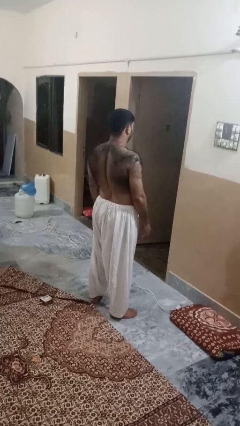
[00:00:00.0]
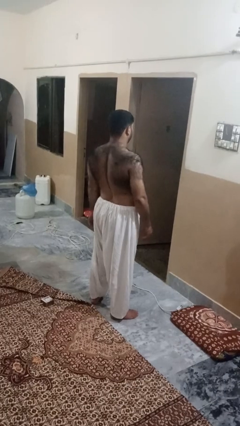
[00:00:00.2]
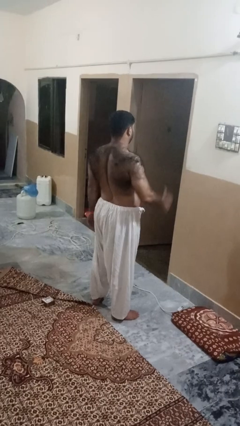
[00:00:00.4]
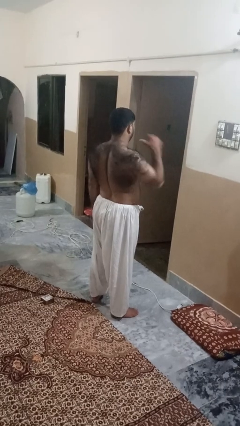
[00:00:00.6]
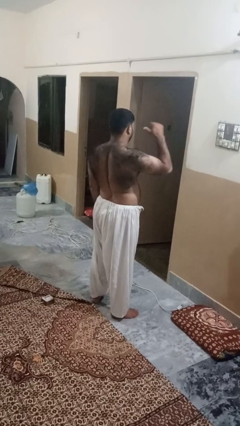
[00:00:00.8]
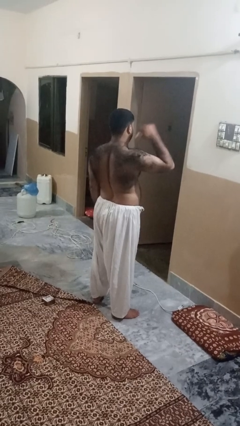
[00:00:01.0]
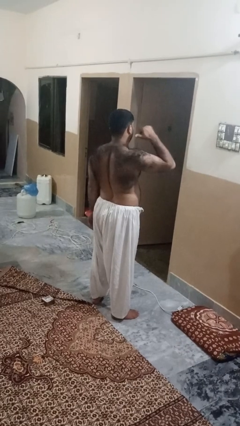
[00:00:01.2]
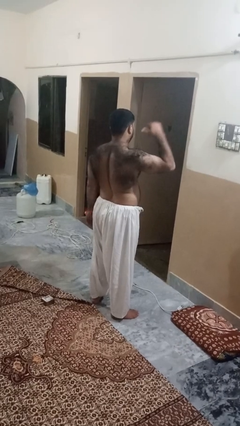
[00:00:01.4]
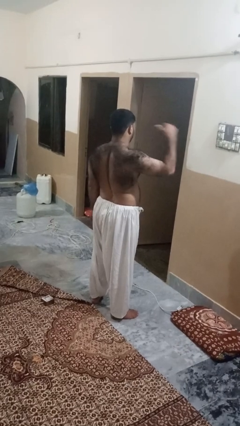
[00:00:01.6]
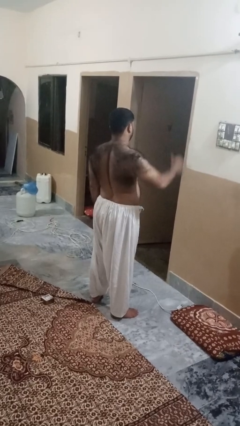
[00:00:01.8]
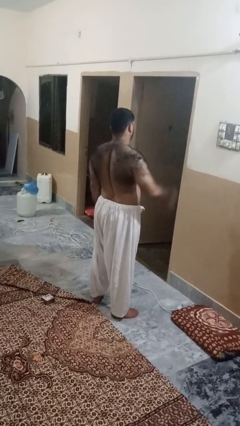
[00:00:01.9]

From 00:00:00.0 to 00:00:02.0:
person gestures behind me

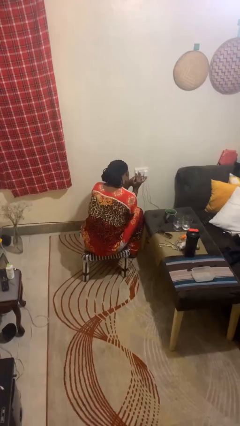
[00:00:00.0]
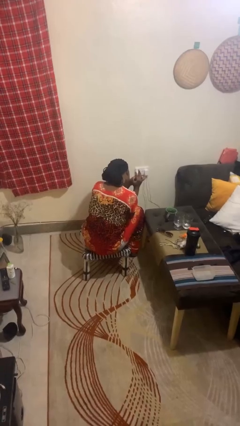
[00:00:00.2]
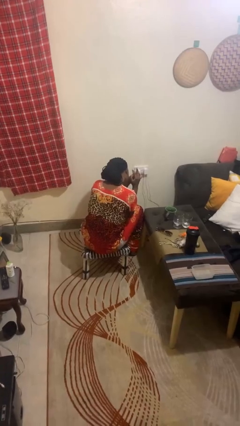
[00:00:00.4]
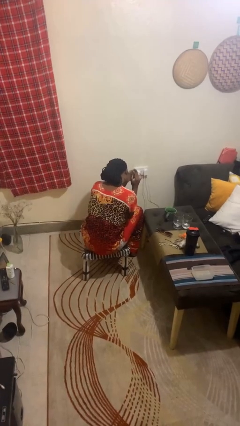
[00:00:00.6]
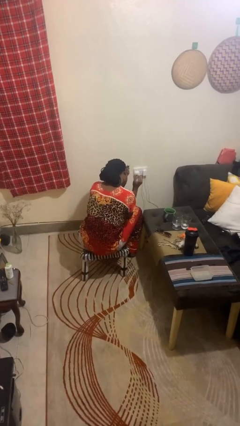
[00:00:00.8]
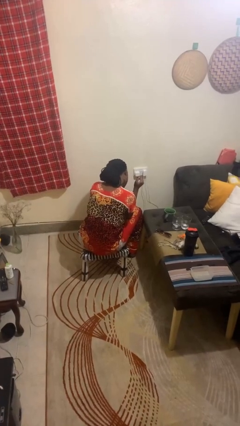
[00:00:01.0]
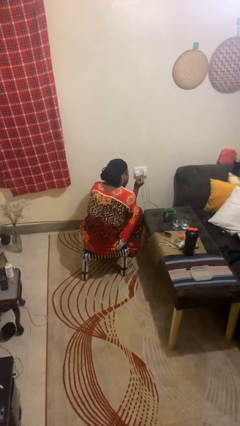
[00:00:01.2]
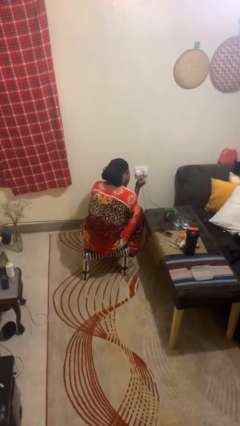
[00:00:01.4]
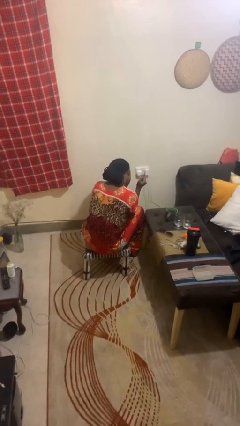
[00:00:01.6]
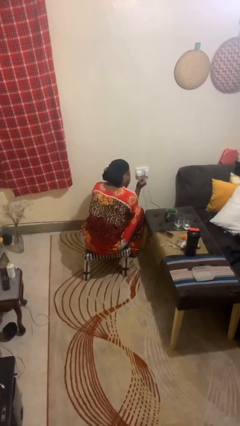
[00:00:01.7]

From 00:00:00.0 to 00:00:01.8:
person takes off ring

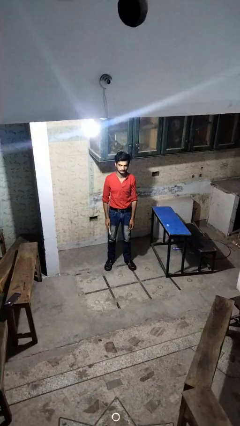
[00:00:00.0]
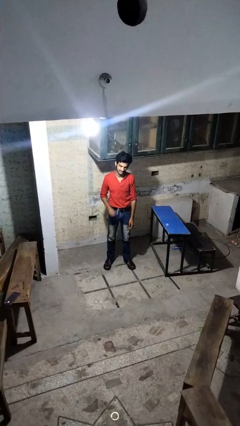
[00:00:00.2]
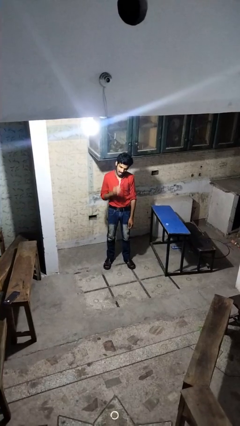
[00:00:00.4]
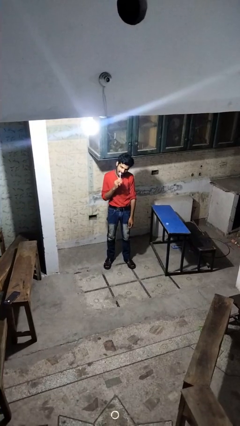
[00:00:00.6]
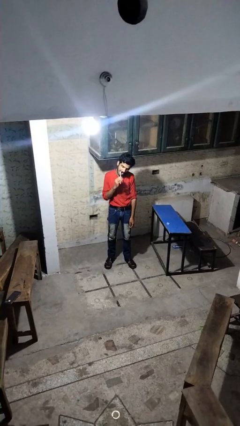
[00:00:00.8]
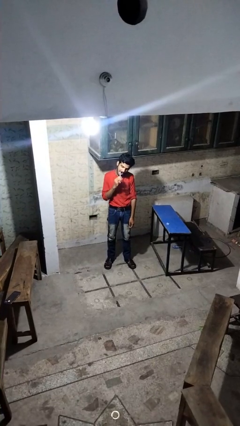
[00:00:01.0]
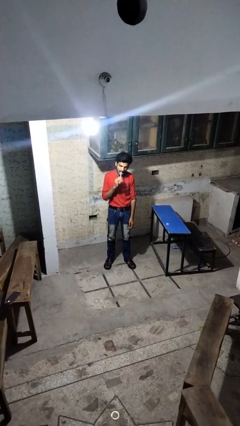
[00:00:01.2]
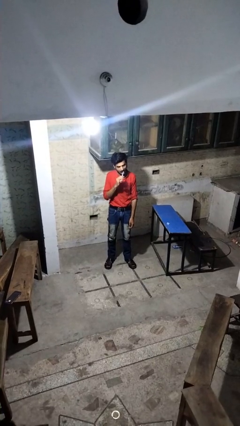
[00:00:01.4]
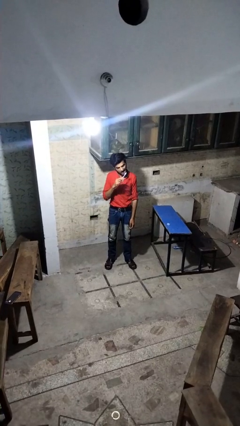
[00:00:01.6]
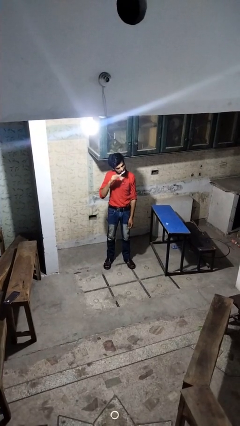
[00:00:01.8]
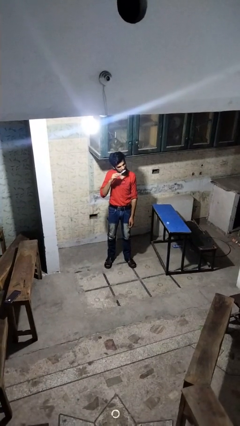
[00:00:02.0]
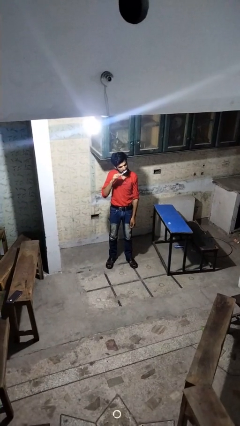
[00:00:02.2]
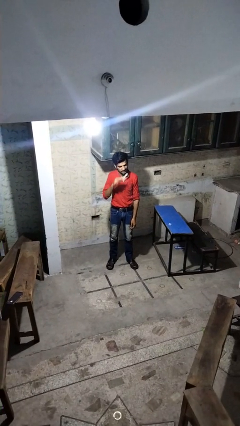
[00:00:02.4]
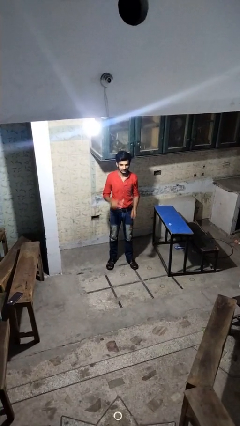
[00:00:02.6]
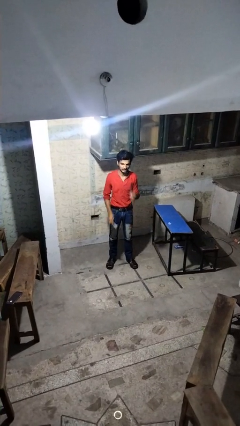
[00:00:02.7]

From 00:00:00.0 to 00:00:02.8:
person brushes teeth

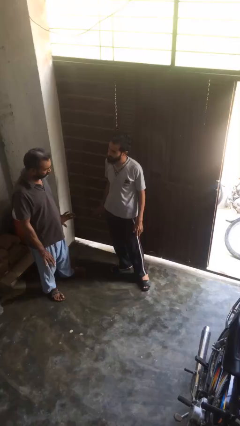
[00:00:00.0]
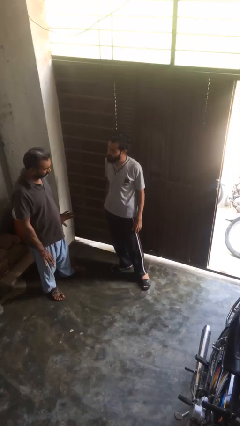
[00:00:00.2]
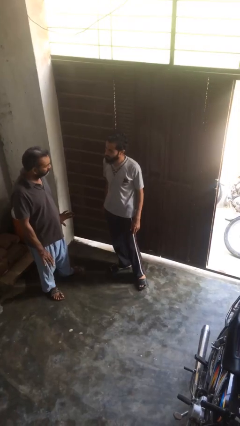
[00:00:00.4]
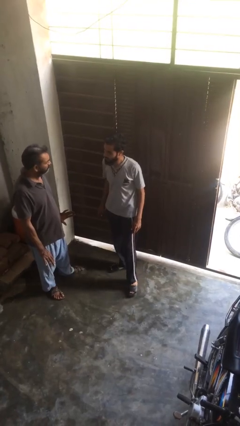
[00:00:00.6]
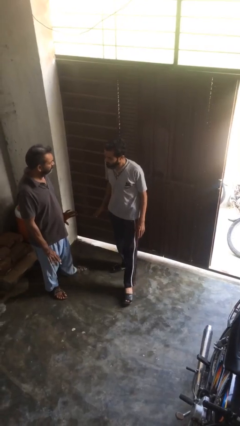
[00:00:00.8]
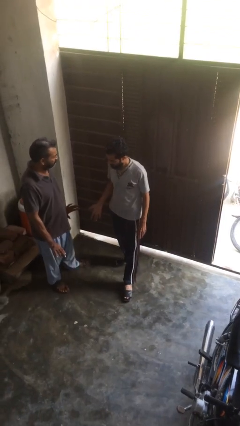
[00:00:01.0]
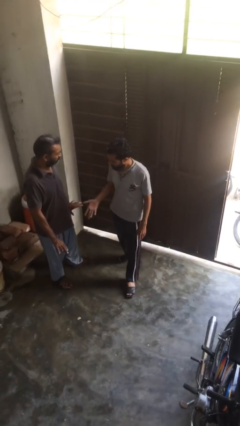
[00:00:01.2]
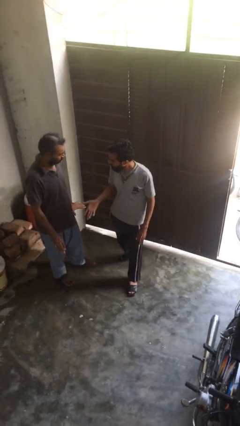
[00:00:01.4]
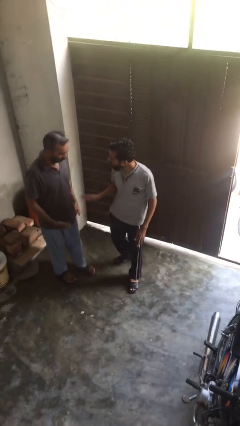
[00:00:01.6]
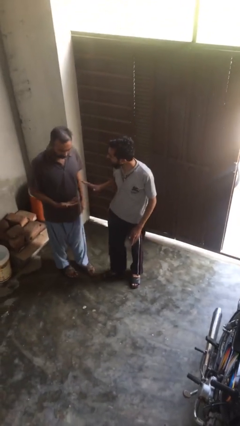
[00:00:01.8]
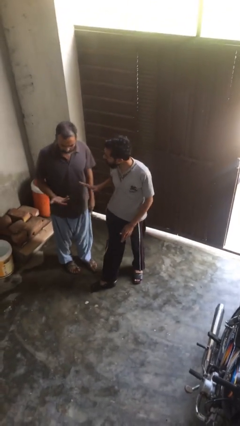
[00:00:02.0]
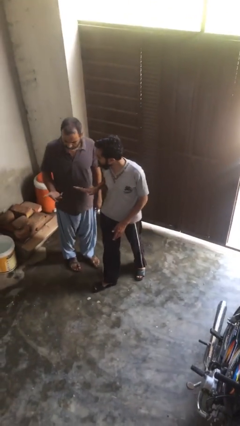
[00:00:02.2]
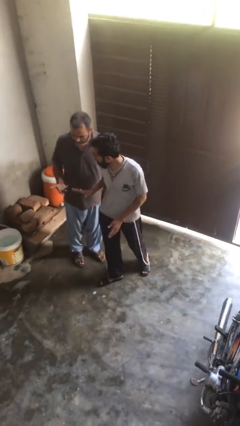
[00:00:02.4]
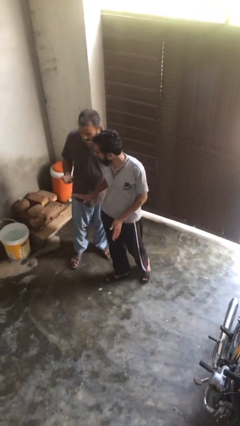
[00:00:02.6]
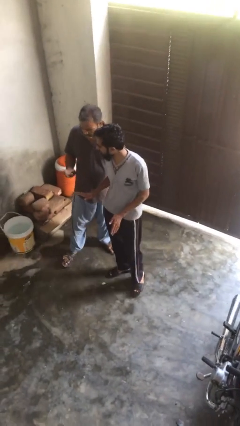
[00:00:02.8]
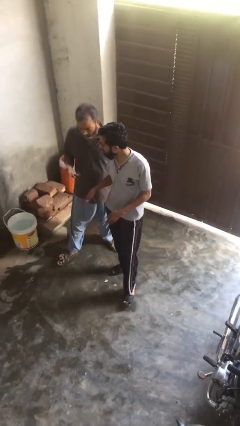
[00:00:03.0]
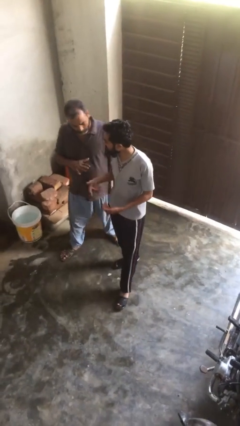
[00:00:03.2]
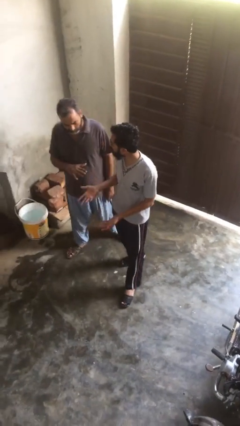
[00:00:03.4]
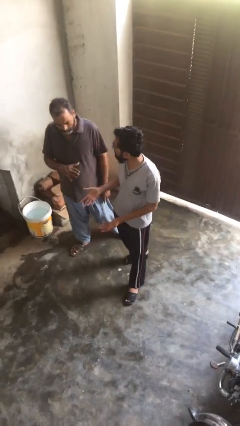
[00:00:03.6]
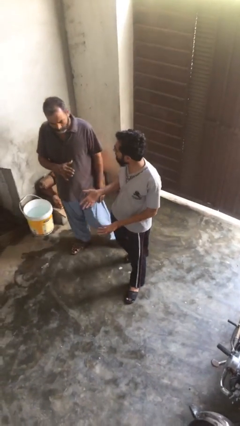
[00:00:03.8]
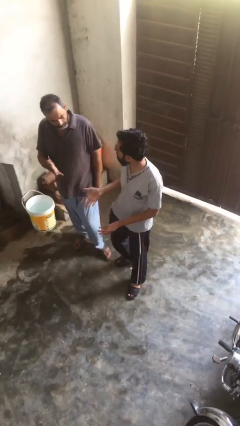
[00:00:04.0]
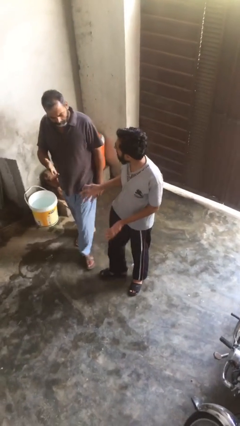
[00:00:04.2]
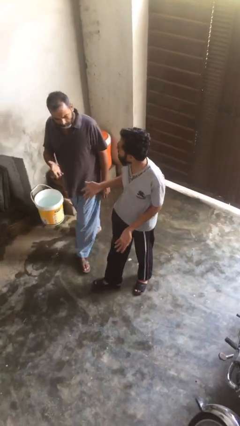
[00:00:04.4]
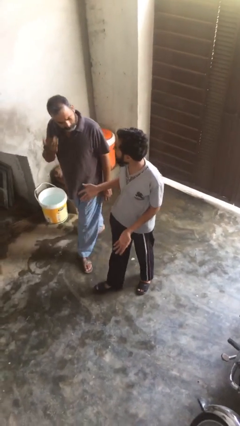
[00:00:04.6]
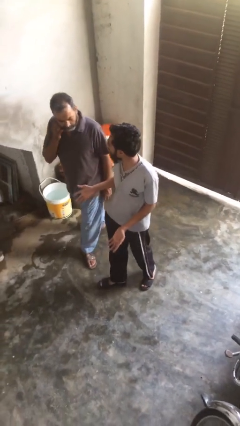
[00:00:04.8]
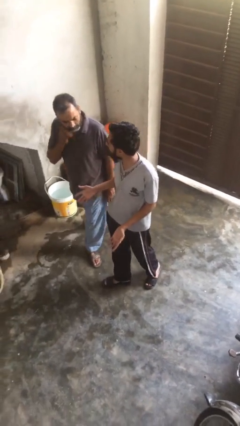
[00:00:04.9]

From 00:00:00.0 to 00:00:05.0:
person talks to person

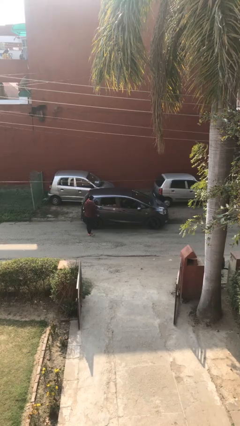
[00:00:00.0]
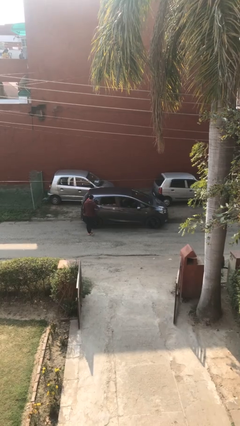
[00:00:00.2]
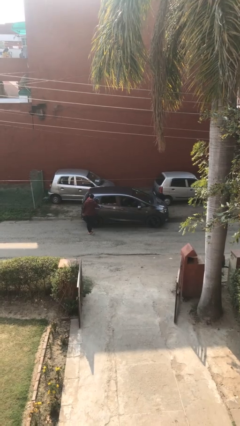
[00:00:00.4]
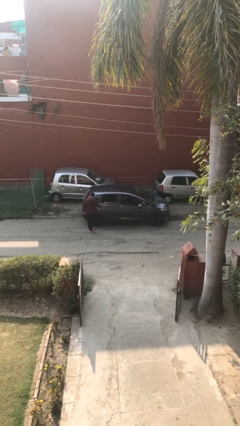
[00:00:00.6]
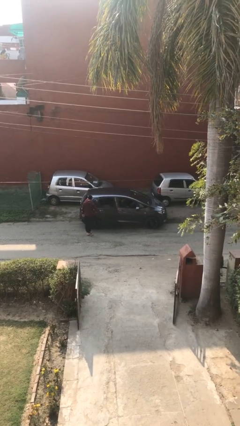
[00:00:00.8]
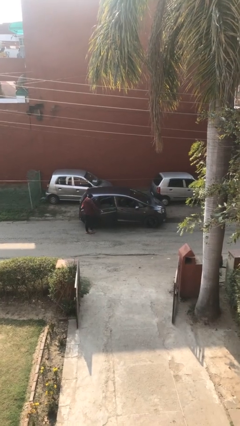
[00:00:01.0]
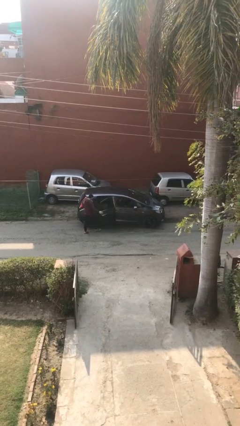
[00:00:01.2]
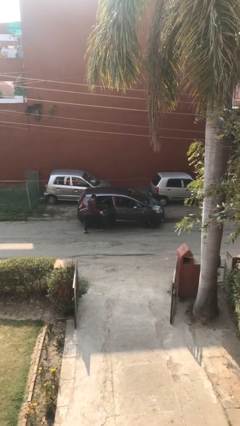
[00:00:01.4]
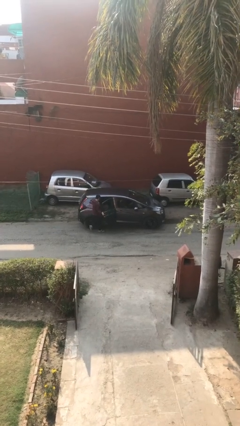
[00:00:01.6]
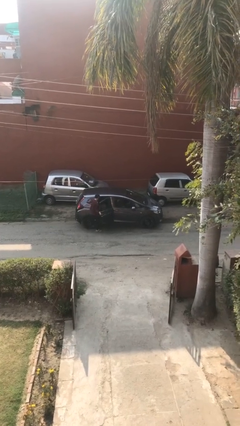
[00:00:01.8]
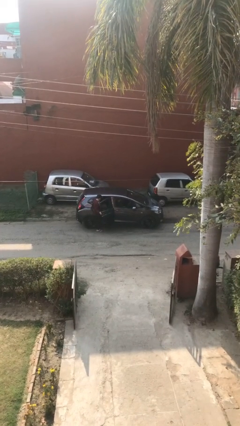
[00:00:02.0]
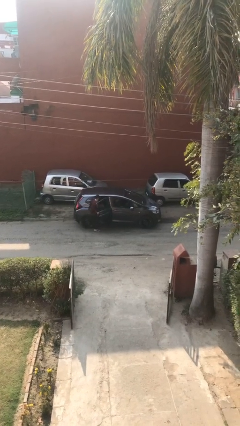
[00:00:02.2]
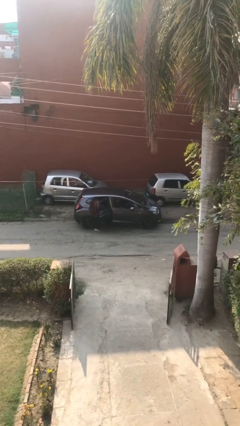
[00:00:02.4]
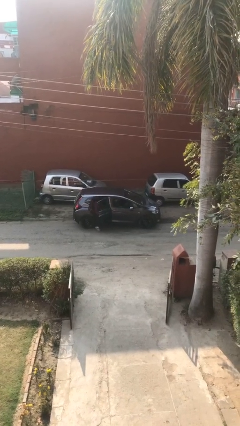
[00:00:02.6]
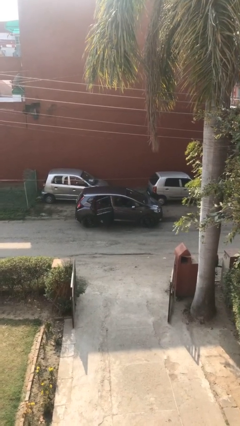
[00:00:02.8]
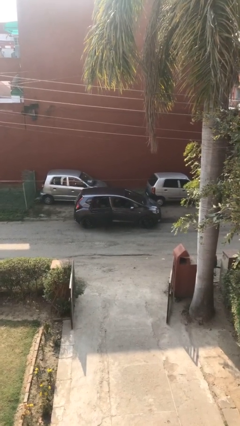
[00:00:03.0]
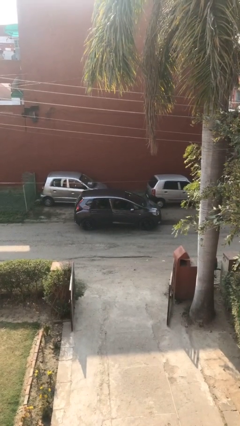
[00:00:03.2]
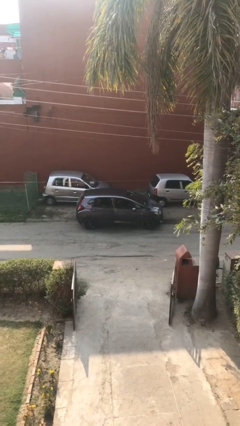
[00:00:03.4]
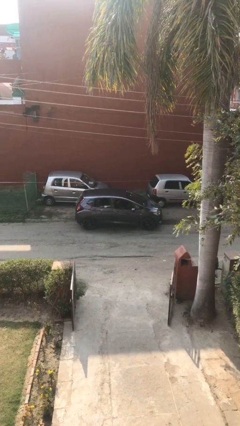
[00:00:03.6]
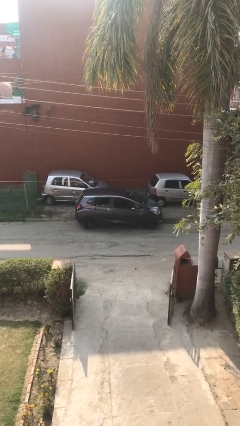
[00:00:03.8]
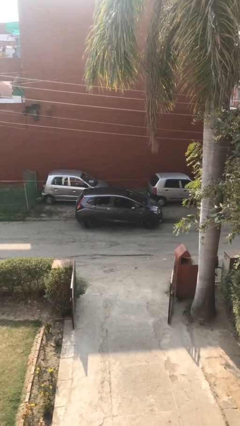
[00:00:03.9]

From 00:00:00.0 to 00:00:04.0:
car picks up person

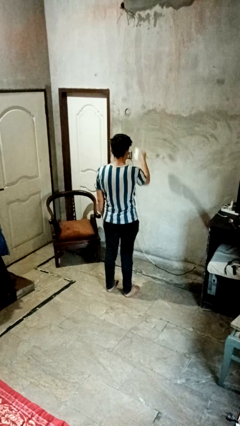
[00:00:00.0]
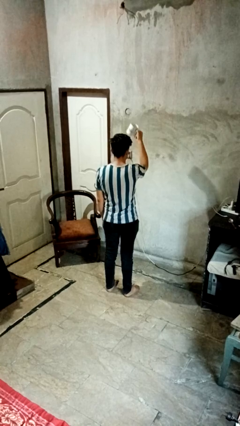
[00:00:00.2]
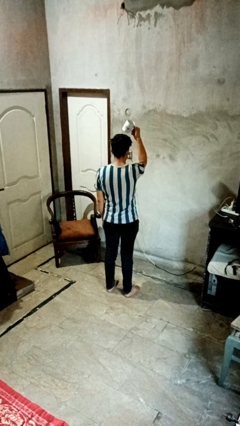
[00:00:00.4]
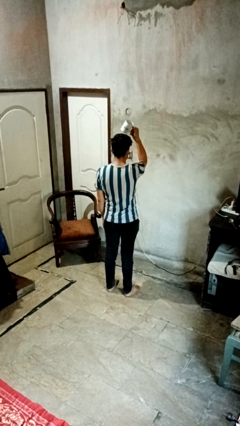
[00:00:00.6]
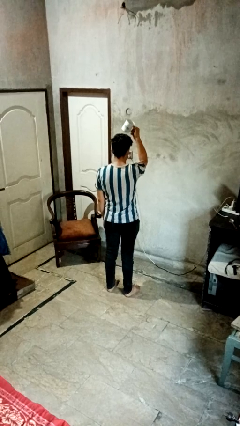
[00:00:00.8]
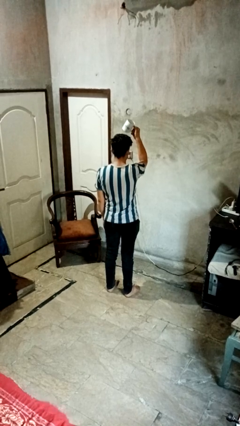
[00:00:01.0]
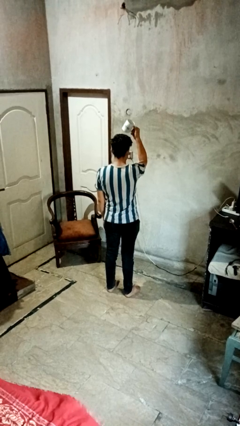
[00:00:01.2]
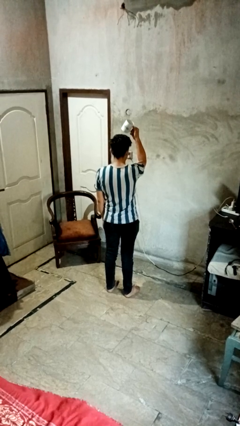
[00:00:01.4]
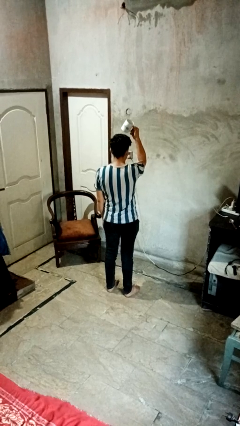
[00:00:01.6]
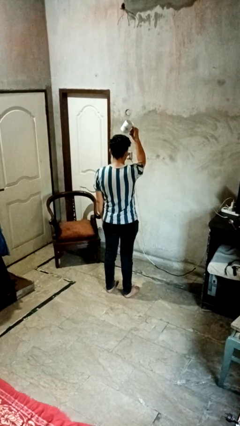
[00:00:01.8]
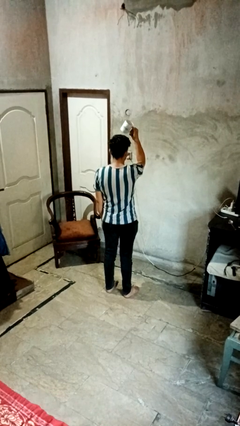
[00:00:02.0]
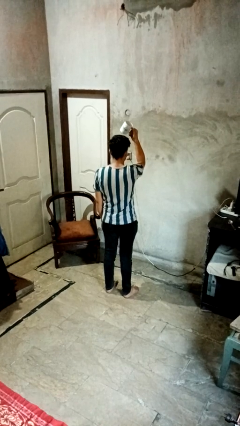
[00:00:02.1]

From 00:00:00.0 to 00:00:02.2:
person holds object above head
